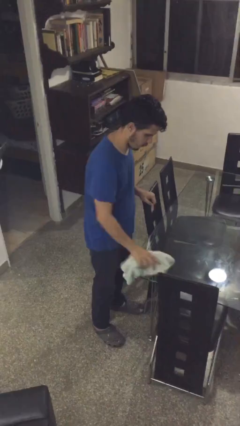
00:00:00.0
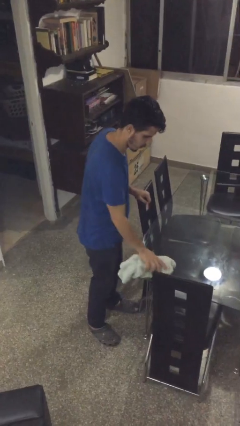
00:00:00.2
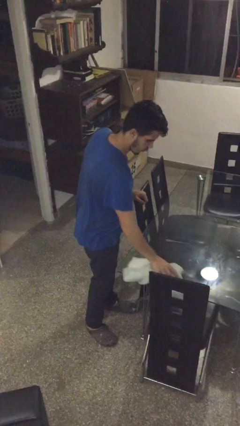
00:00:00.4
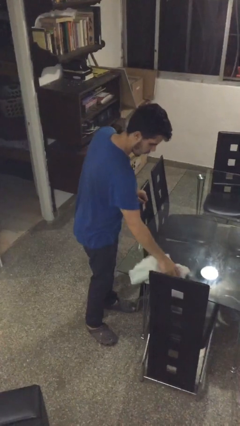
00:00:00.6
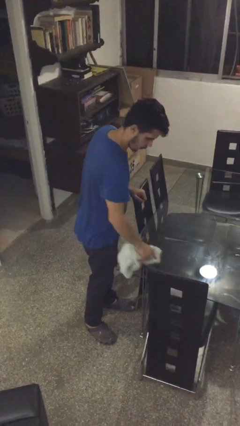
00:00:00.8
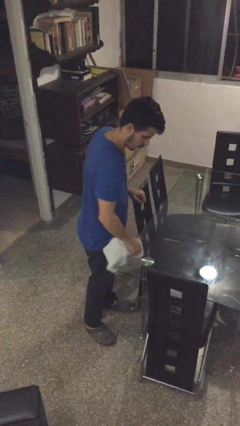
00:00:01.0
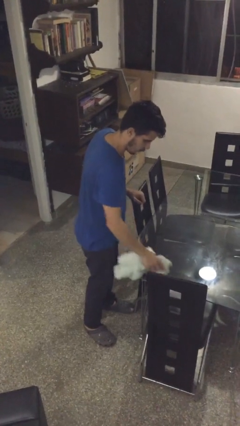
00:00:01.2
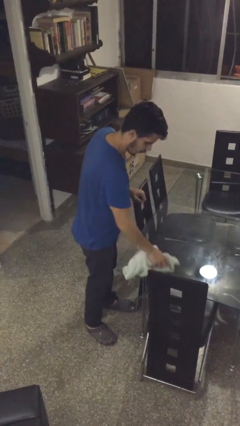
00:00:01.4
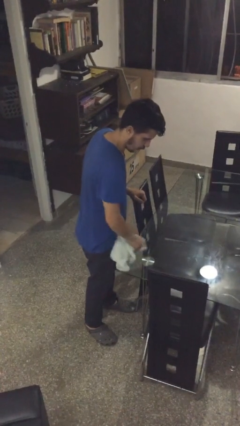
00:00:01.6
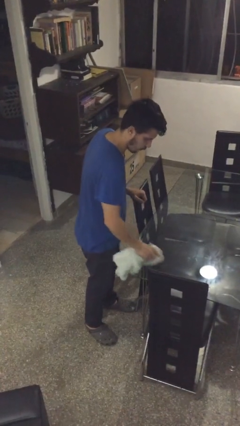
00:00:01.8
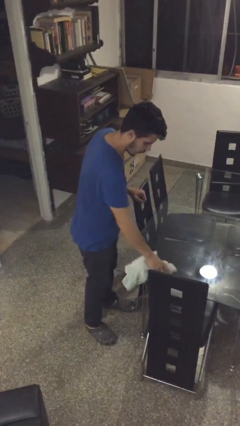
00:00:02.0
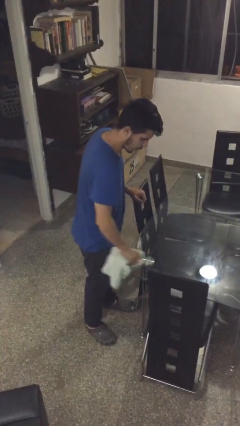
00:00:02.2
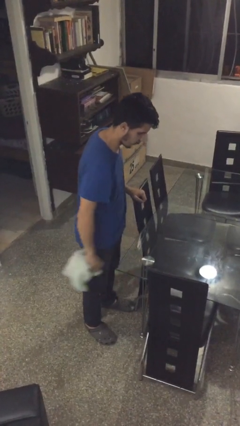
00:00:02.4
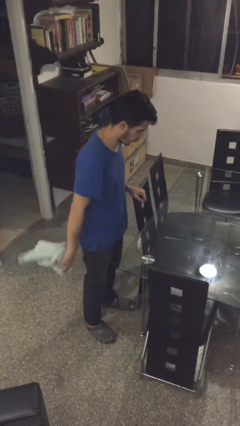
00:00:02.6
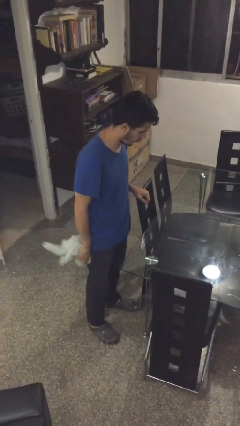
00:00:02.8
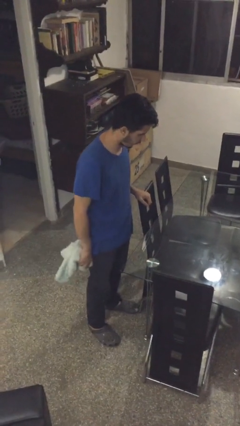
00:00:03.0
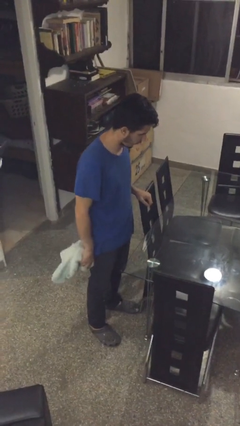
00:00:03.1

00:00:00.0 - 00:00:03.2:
person cleans table with rag

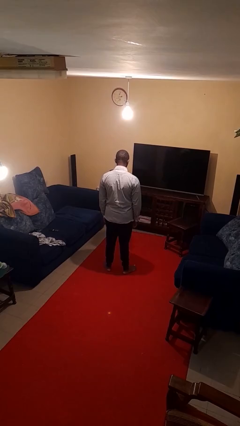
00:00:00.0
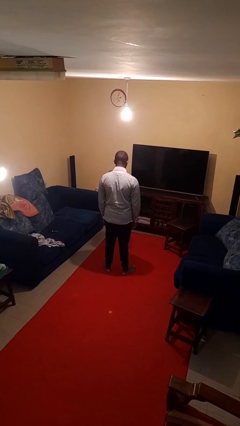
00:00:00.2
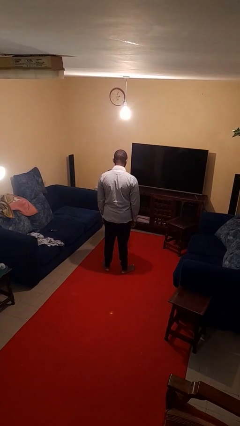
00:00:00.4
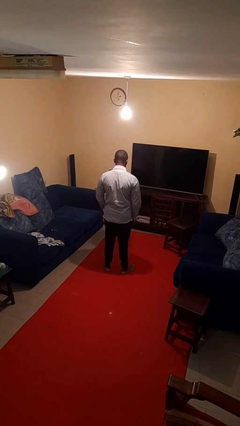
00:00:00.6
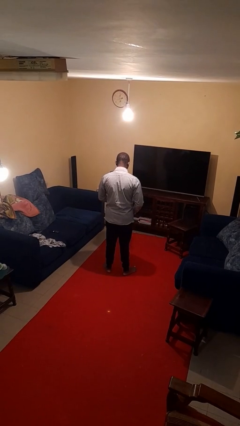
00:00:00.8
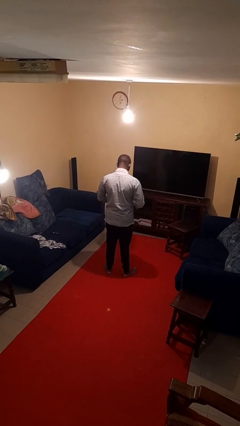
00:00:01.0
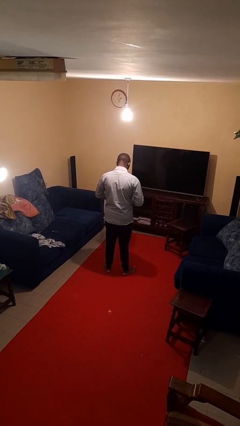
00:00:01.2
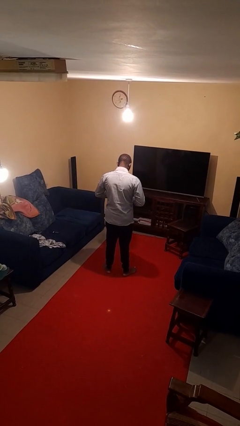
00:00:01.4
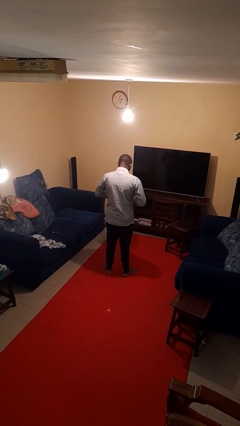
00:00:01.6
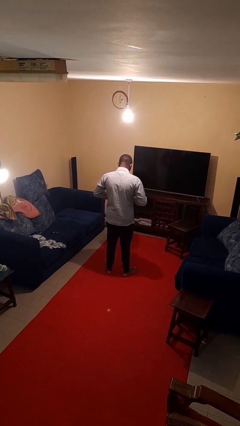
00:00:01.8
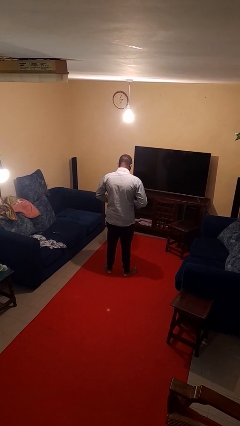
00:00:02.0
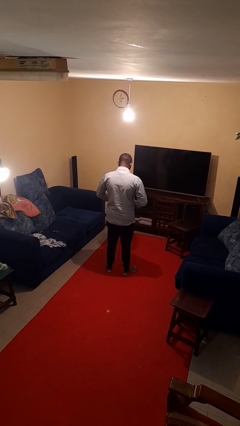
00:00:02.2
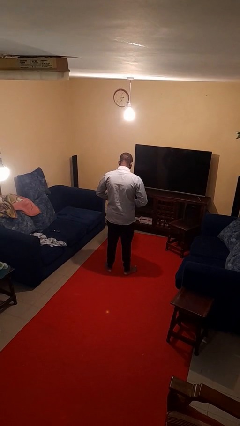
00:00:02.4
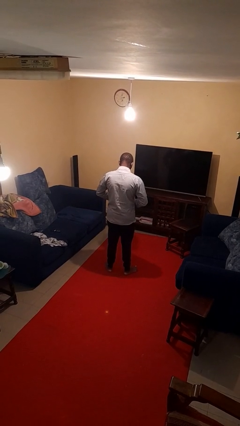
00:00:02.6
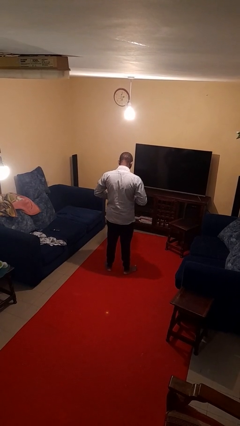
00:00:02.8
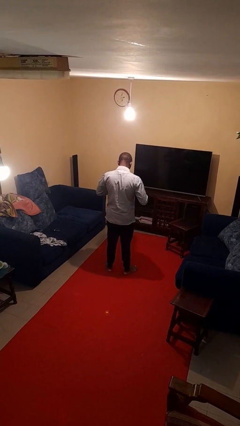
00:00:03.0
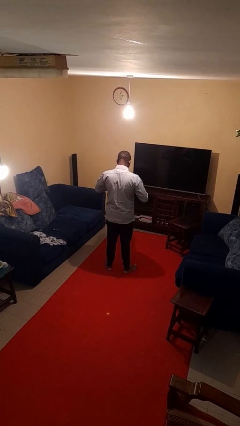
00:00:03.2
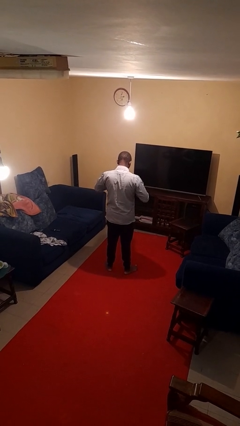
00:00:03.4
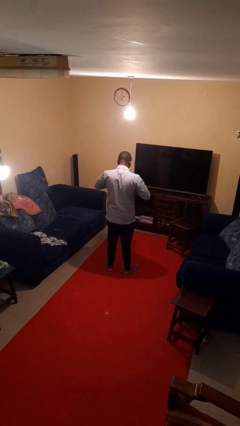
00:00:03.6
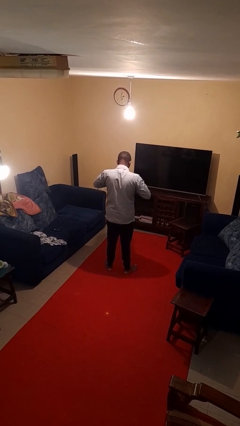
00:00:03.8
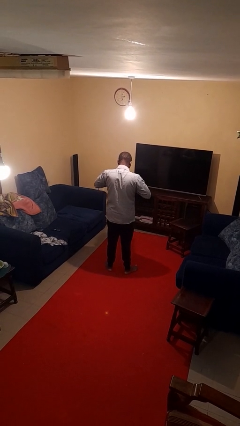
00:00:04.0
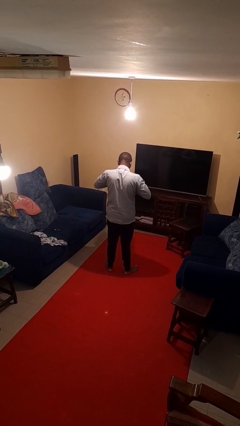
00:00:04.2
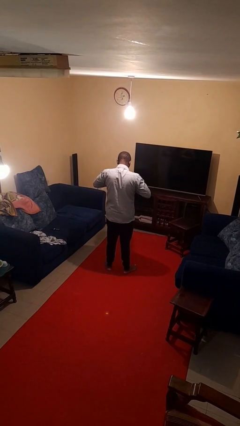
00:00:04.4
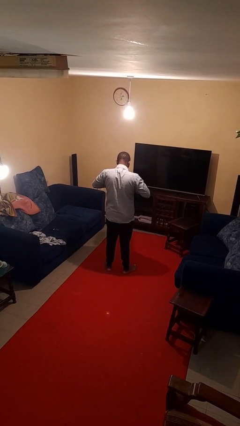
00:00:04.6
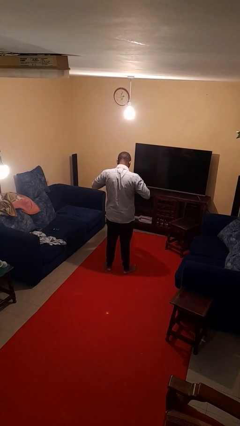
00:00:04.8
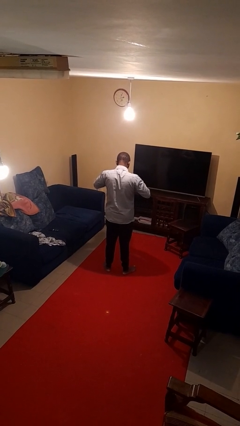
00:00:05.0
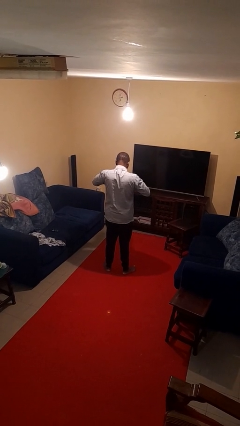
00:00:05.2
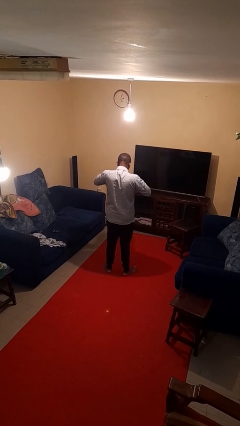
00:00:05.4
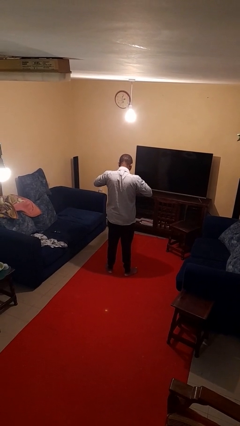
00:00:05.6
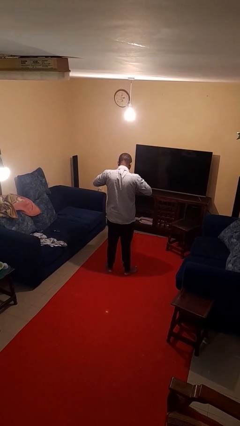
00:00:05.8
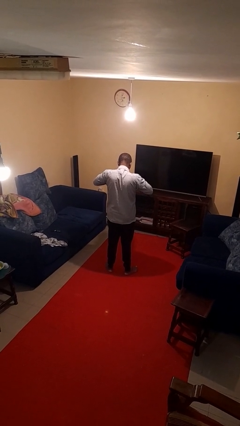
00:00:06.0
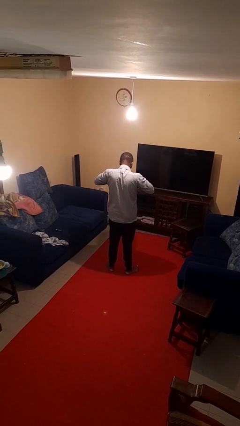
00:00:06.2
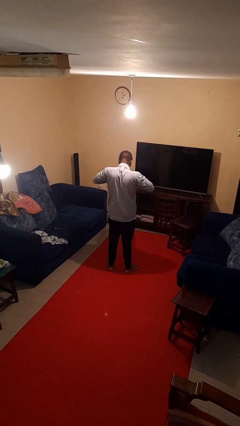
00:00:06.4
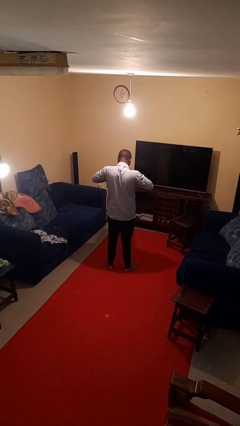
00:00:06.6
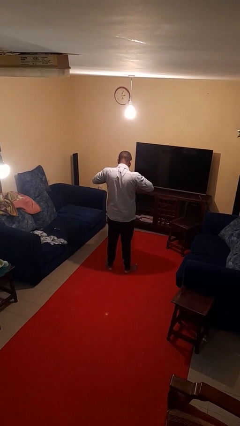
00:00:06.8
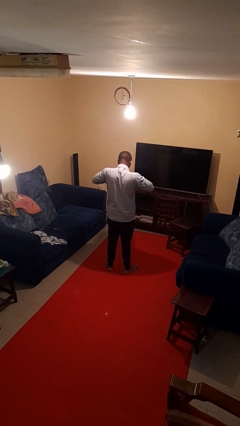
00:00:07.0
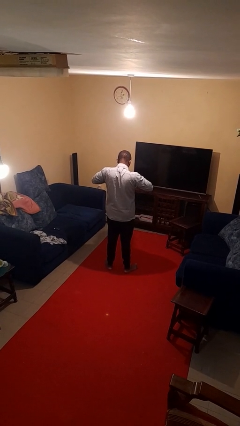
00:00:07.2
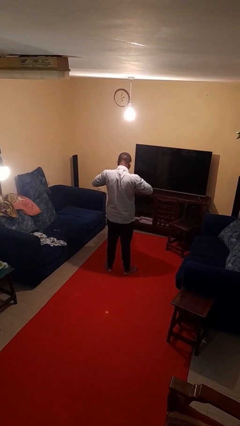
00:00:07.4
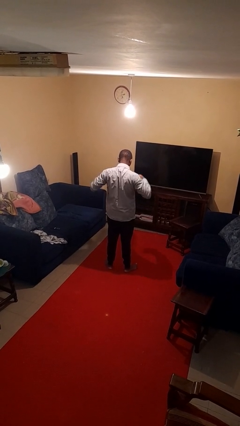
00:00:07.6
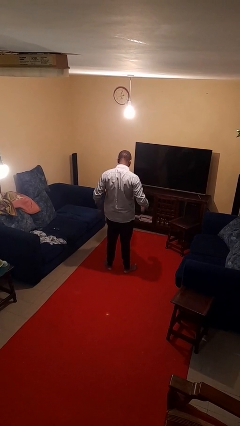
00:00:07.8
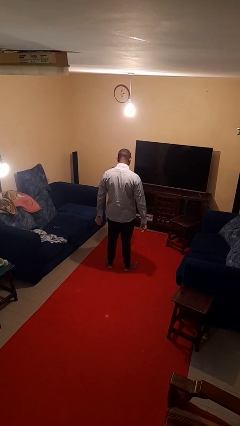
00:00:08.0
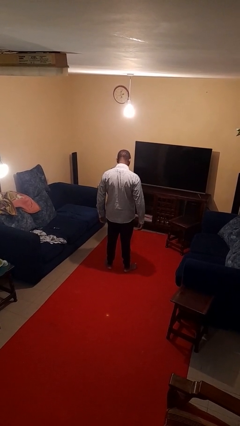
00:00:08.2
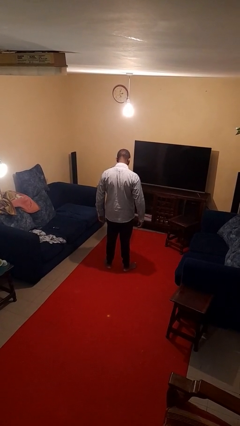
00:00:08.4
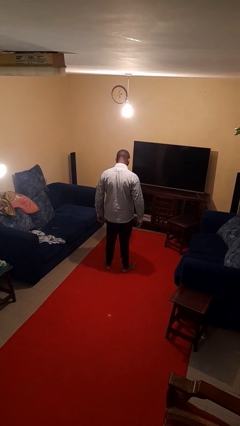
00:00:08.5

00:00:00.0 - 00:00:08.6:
person unbuttons shirt

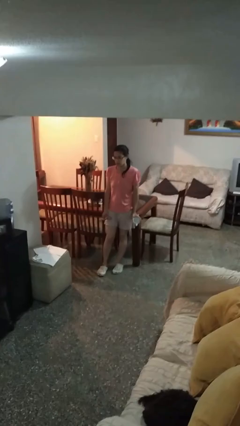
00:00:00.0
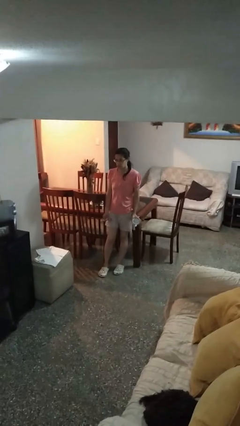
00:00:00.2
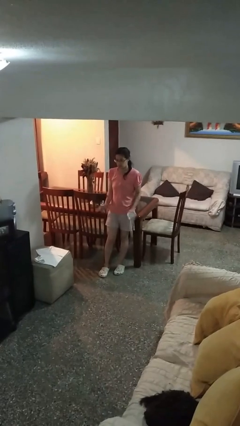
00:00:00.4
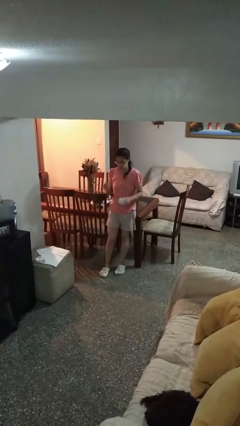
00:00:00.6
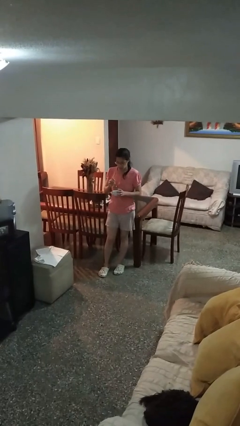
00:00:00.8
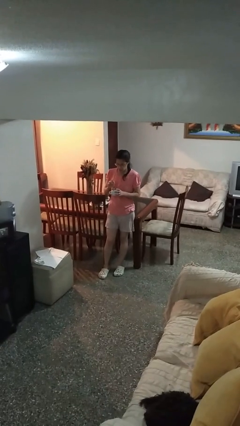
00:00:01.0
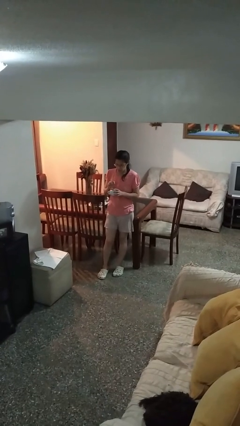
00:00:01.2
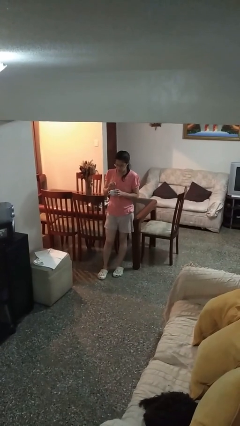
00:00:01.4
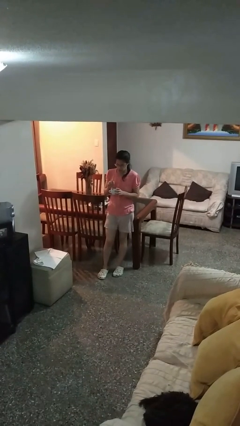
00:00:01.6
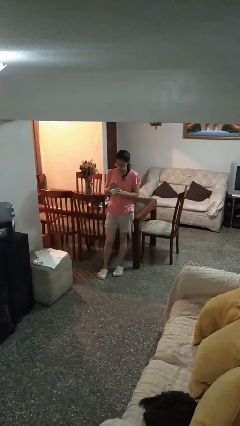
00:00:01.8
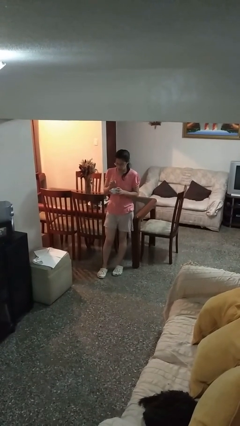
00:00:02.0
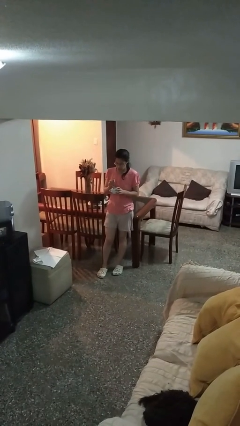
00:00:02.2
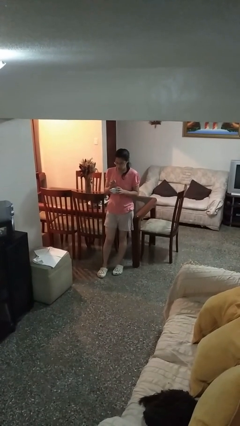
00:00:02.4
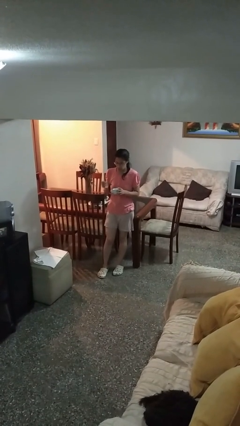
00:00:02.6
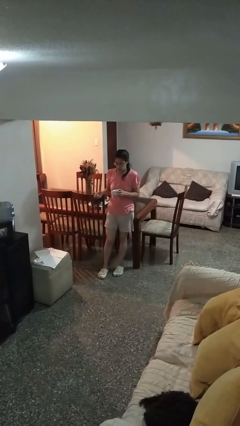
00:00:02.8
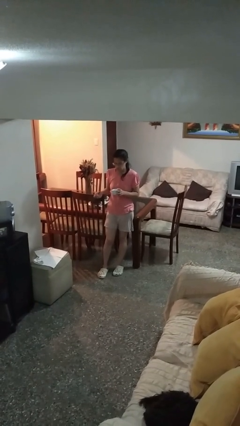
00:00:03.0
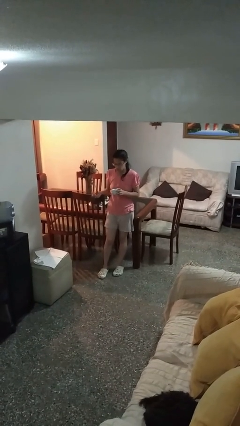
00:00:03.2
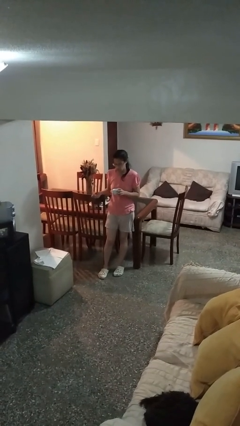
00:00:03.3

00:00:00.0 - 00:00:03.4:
person stirs mug

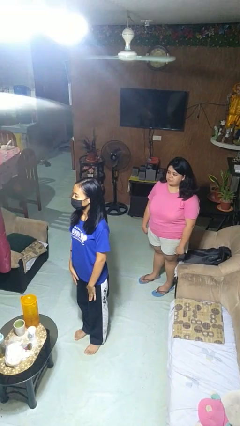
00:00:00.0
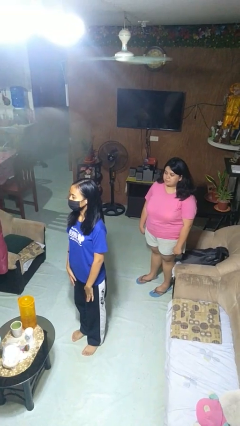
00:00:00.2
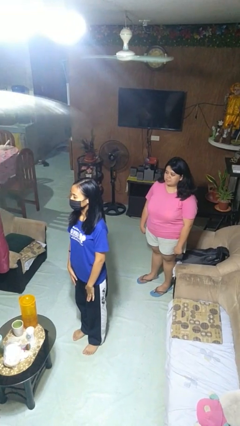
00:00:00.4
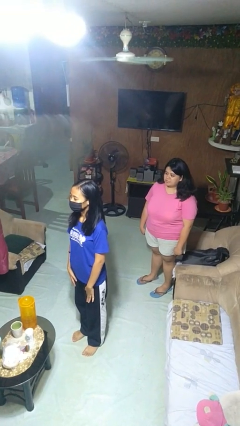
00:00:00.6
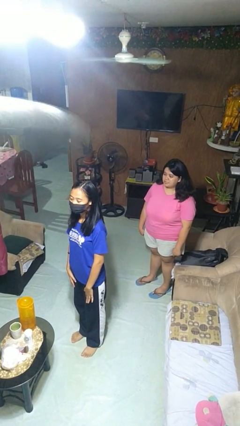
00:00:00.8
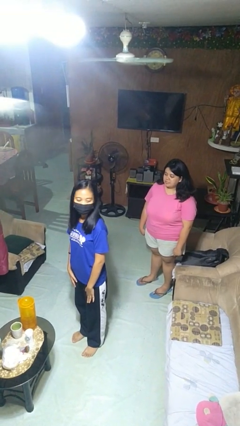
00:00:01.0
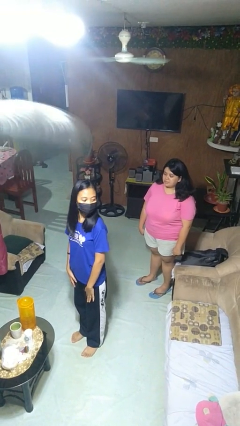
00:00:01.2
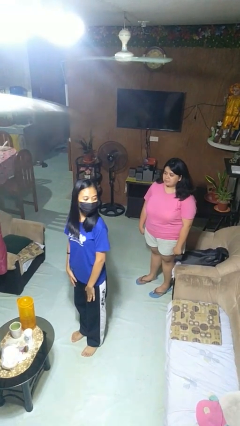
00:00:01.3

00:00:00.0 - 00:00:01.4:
person looks over shoulder

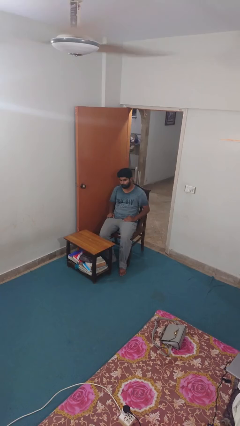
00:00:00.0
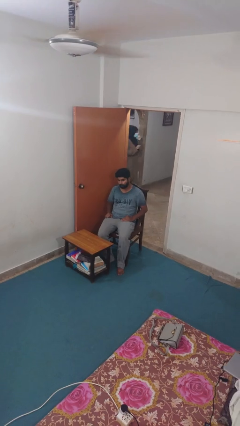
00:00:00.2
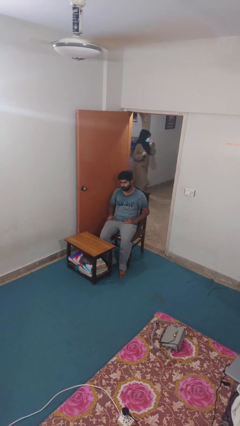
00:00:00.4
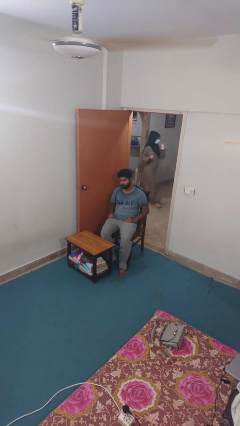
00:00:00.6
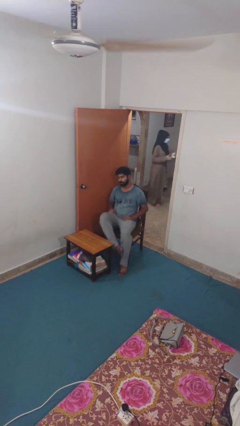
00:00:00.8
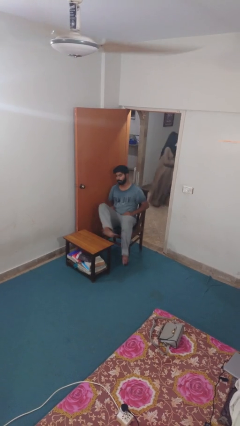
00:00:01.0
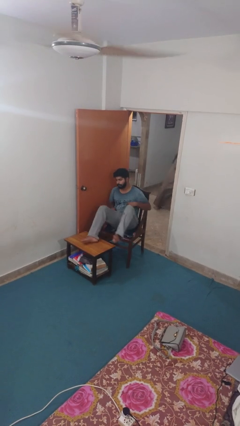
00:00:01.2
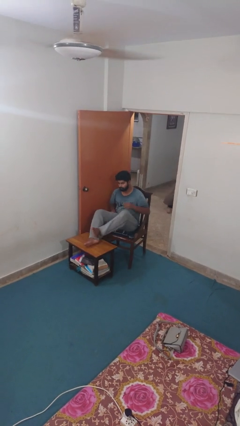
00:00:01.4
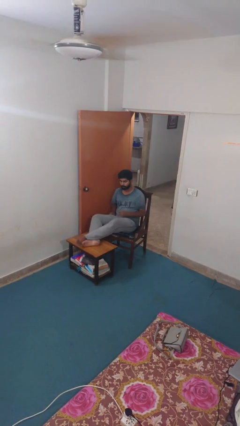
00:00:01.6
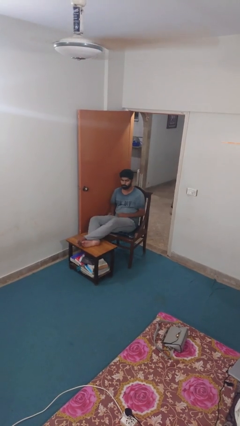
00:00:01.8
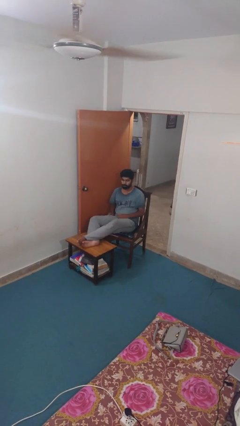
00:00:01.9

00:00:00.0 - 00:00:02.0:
person puts feet up
